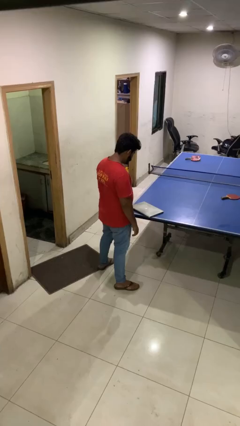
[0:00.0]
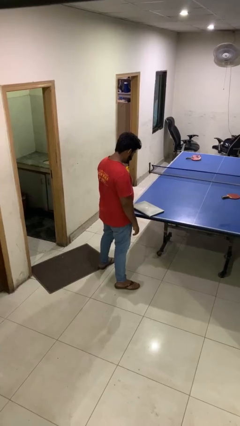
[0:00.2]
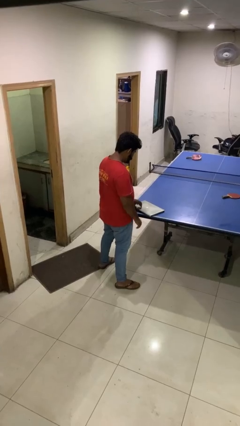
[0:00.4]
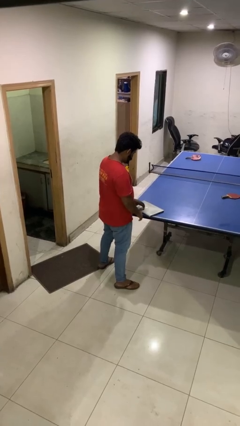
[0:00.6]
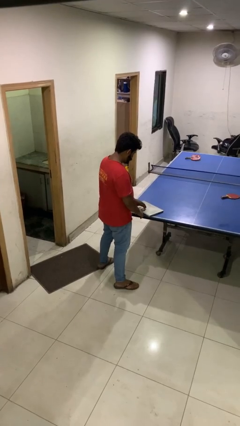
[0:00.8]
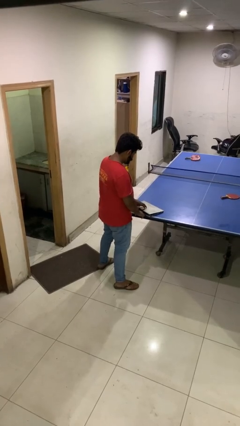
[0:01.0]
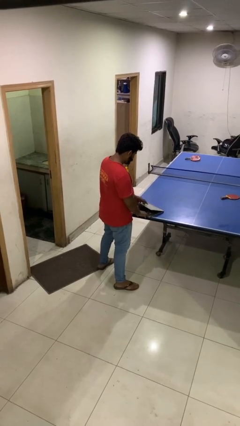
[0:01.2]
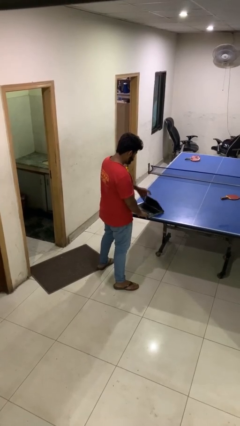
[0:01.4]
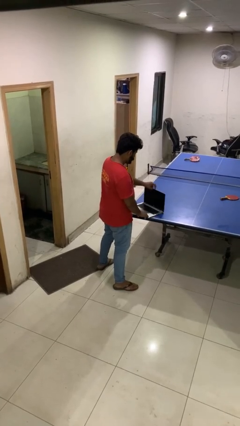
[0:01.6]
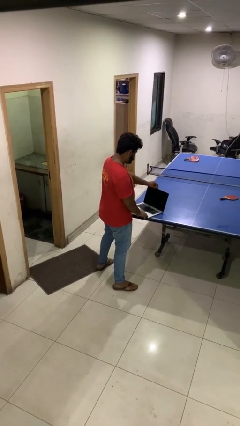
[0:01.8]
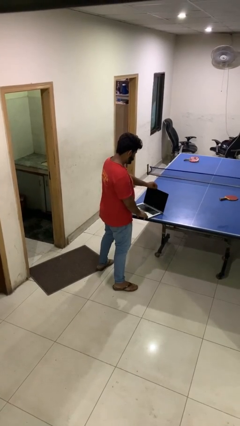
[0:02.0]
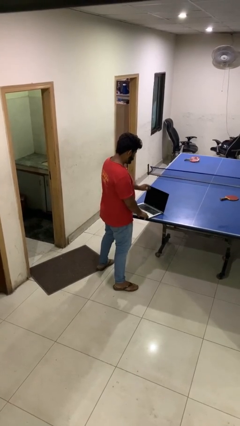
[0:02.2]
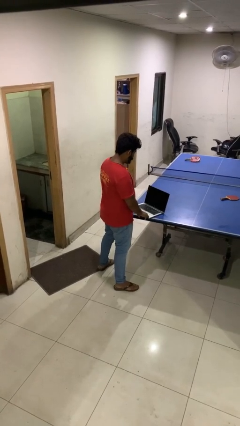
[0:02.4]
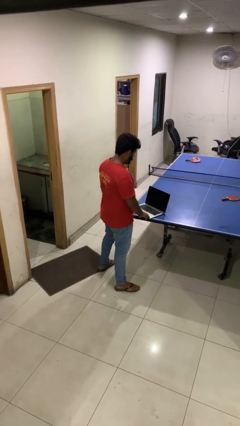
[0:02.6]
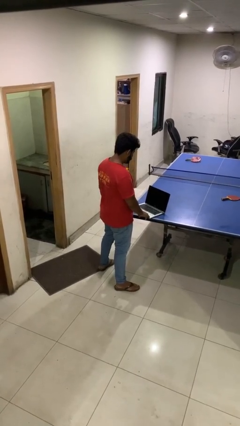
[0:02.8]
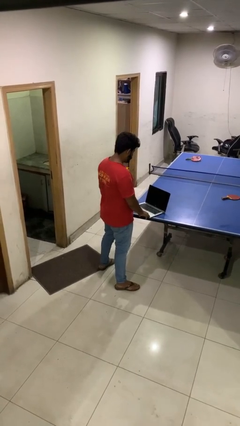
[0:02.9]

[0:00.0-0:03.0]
person opens laptop

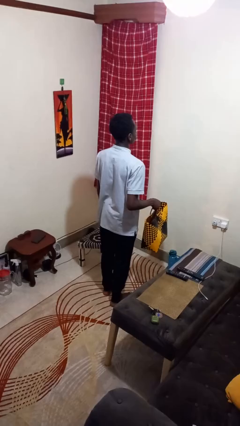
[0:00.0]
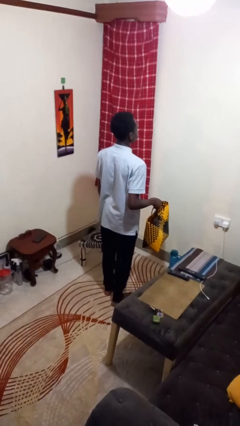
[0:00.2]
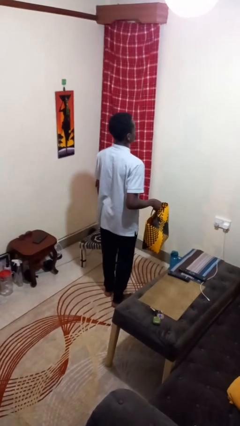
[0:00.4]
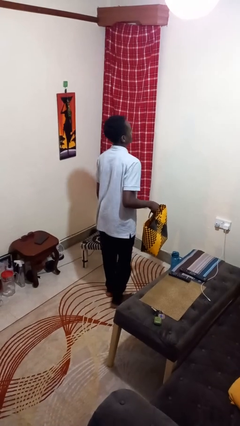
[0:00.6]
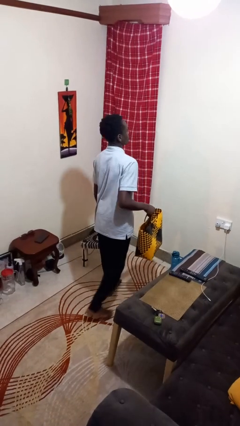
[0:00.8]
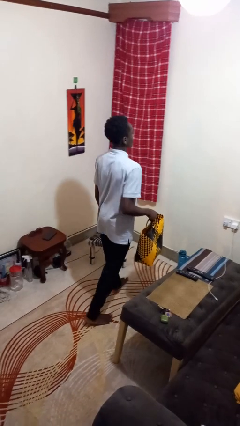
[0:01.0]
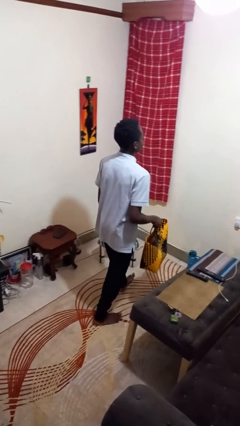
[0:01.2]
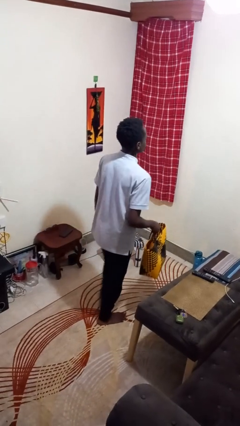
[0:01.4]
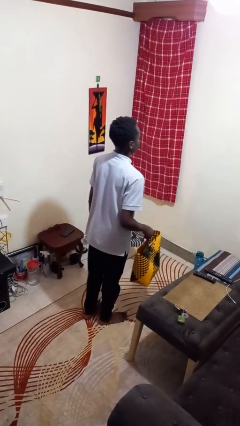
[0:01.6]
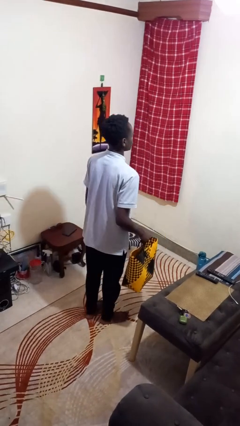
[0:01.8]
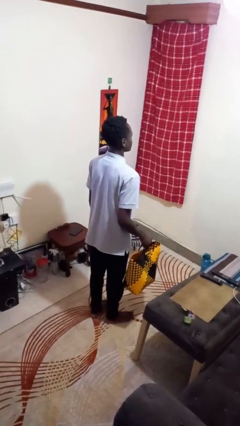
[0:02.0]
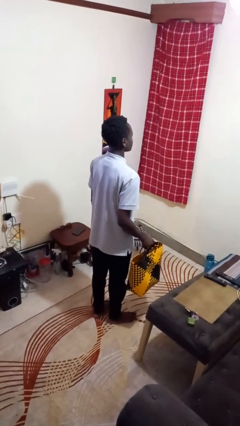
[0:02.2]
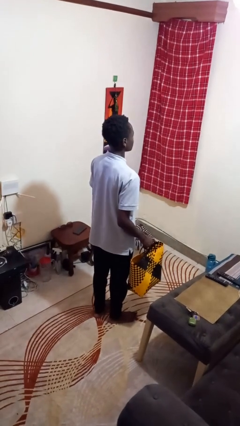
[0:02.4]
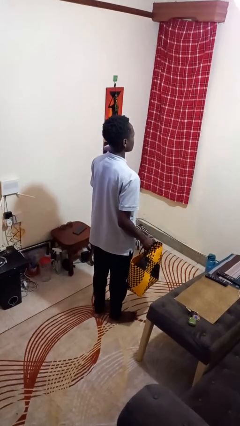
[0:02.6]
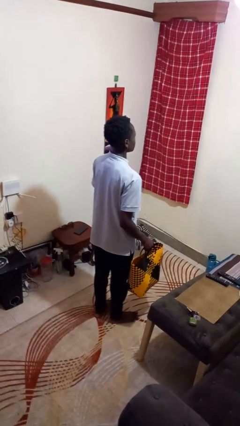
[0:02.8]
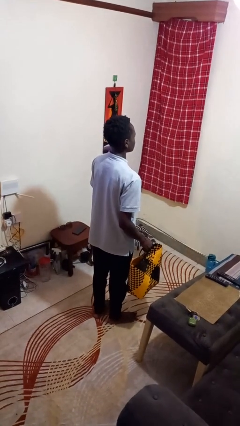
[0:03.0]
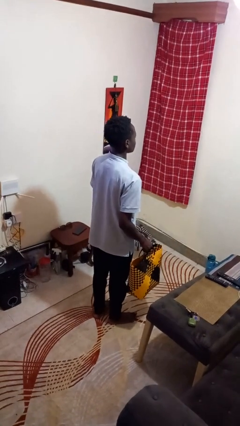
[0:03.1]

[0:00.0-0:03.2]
person carries groceries

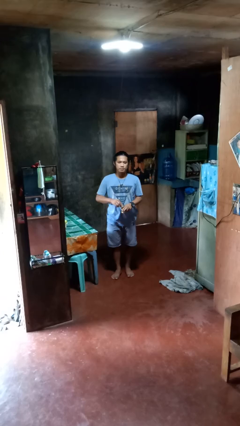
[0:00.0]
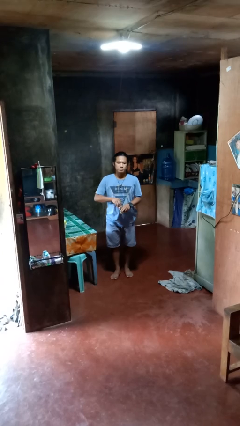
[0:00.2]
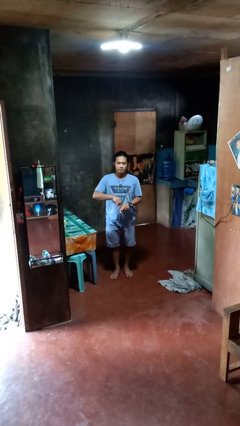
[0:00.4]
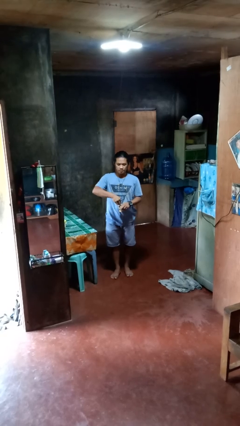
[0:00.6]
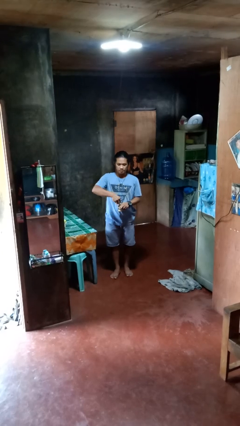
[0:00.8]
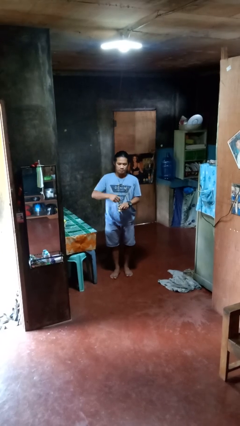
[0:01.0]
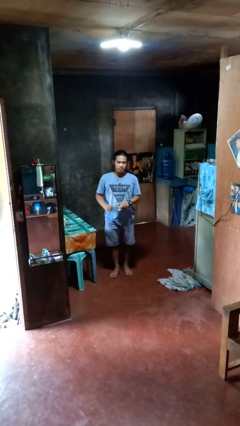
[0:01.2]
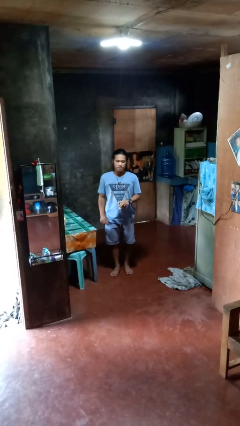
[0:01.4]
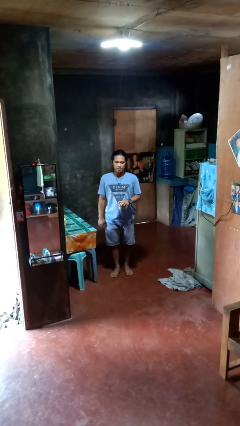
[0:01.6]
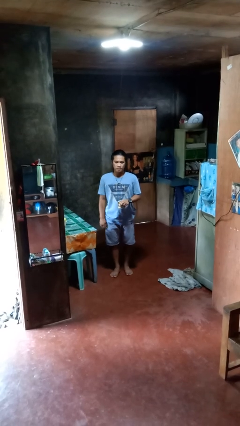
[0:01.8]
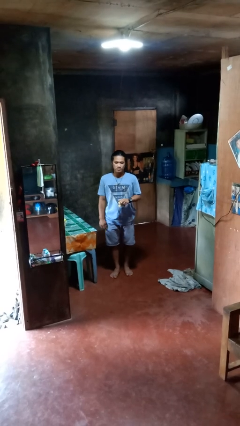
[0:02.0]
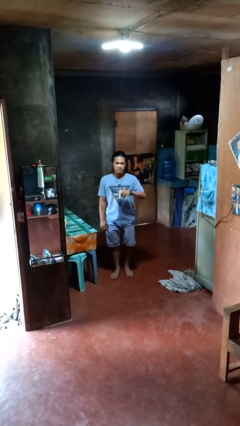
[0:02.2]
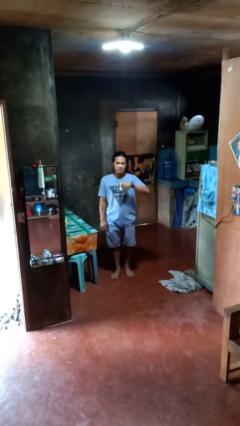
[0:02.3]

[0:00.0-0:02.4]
person opens beverage can

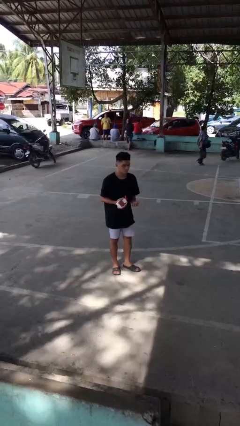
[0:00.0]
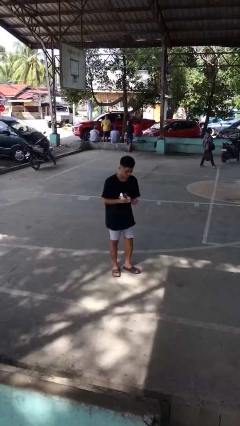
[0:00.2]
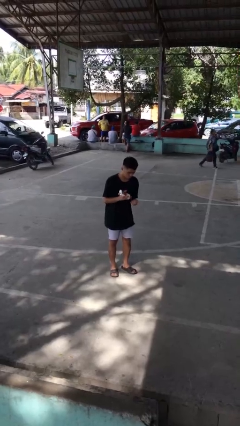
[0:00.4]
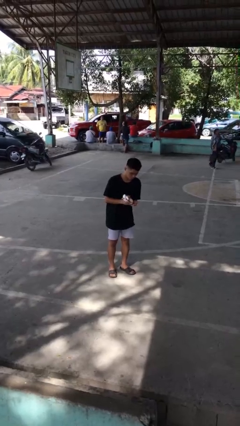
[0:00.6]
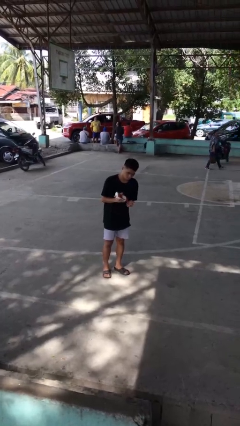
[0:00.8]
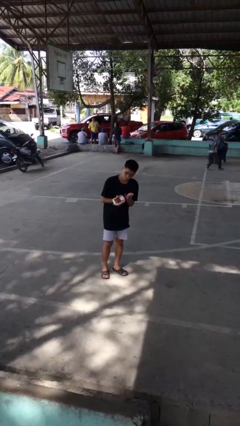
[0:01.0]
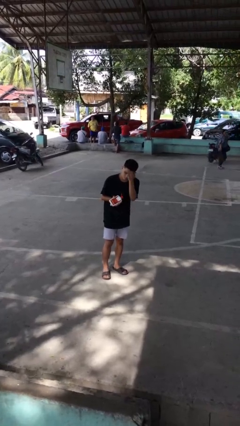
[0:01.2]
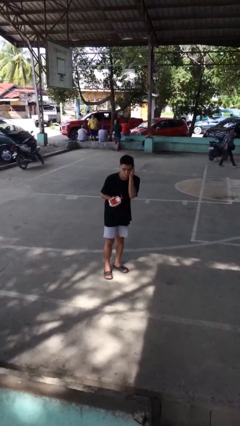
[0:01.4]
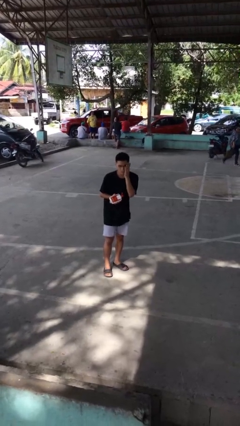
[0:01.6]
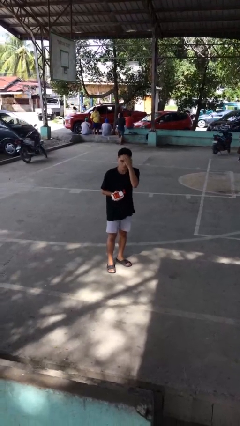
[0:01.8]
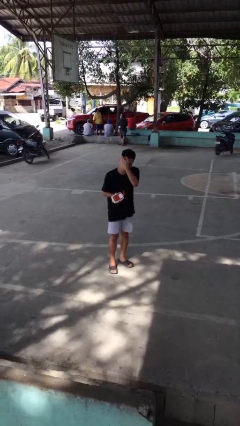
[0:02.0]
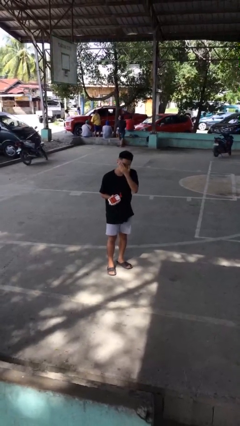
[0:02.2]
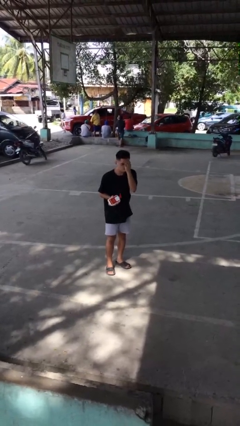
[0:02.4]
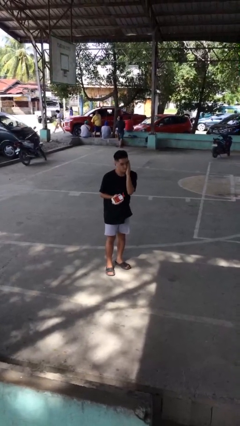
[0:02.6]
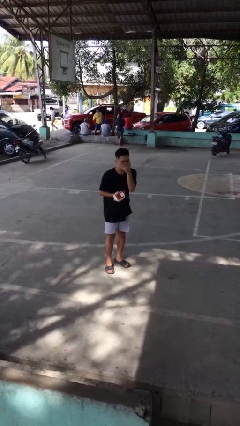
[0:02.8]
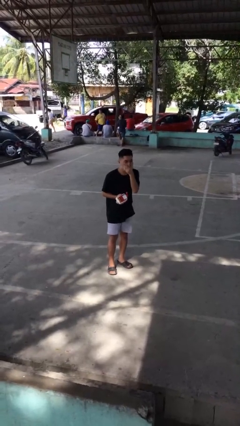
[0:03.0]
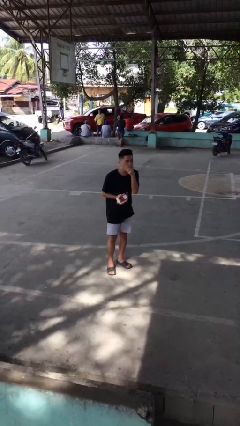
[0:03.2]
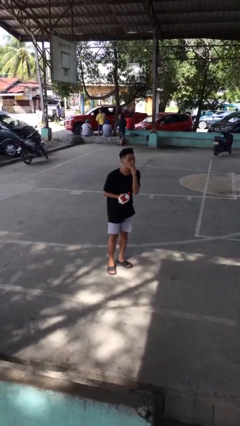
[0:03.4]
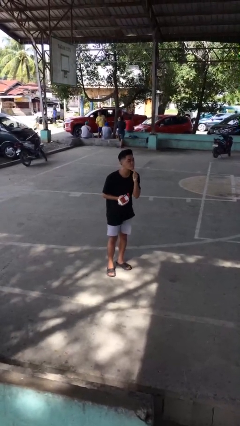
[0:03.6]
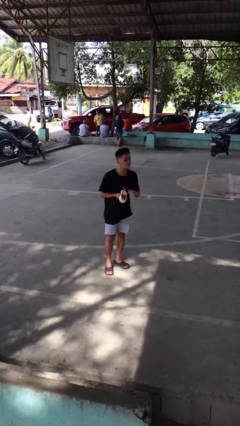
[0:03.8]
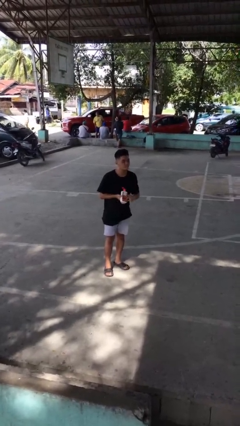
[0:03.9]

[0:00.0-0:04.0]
person applies facial moisturizer

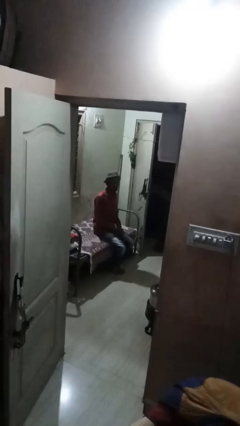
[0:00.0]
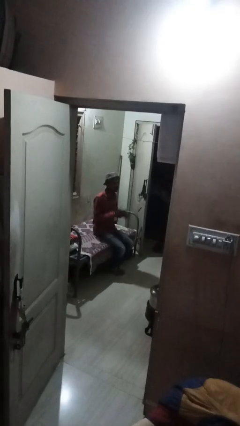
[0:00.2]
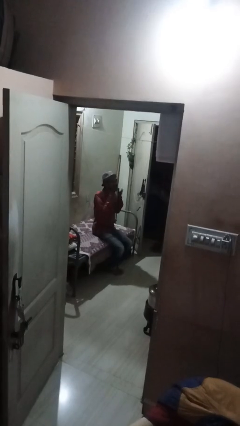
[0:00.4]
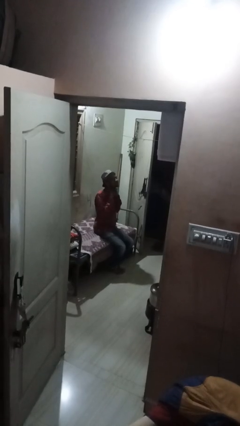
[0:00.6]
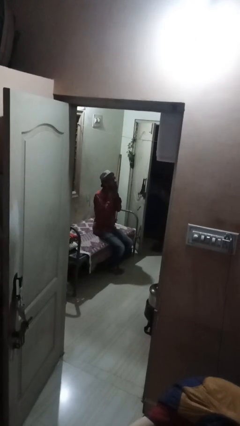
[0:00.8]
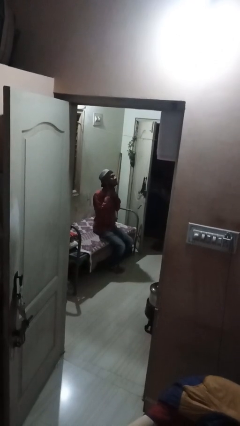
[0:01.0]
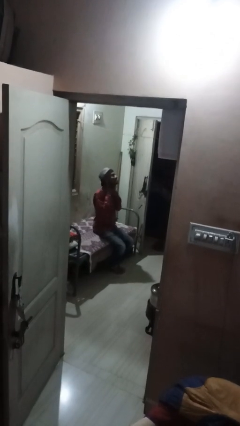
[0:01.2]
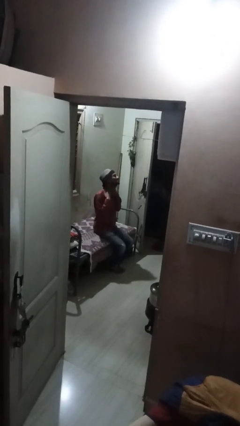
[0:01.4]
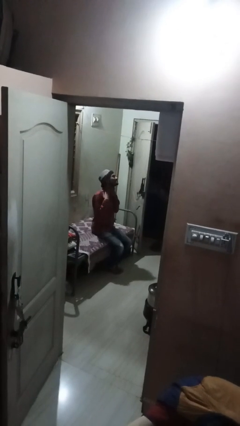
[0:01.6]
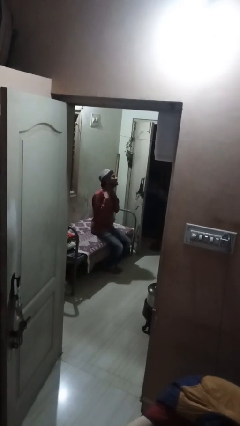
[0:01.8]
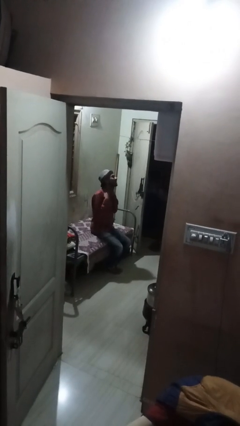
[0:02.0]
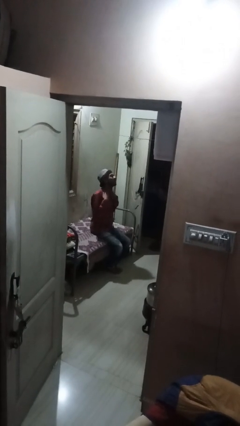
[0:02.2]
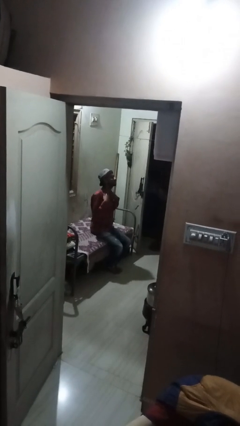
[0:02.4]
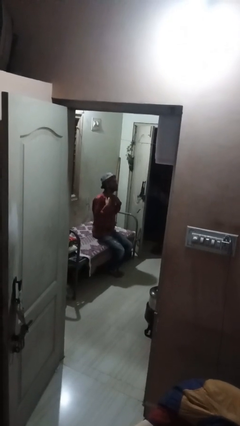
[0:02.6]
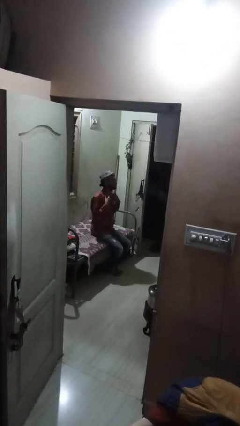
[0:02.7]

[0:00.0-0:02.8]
person rubs neck

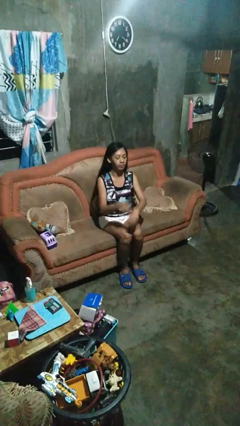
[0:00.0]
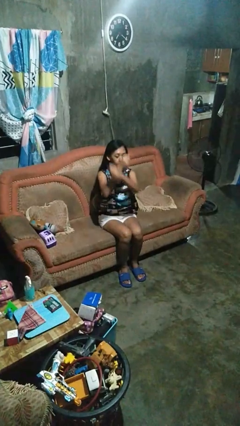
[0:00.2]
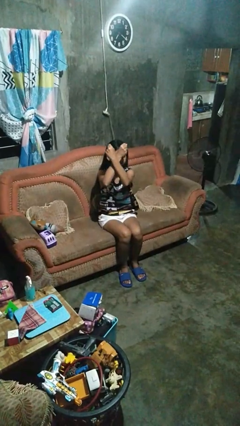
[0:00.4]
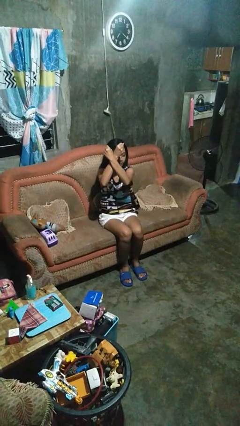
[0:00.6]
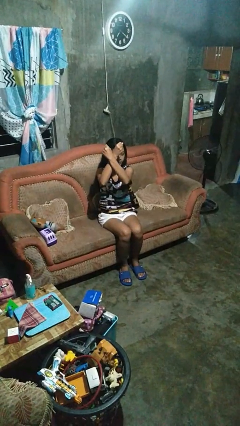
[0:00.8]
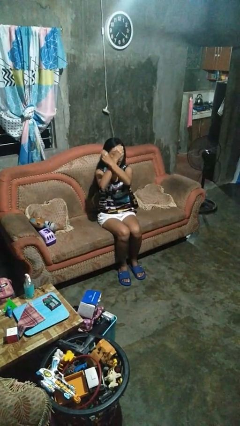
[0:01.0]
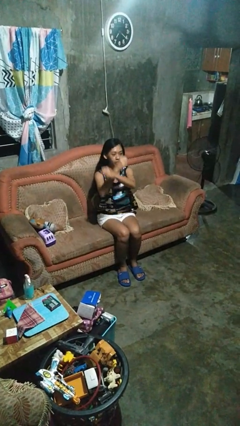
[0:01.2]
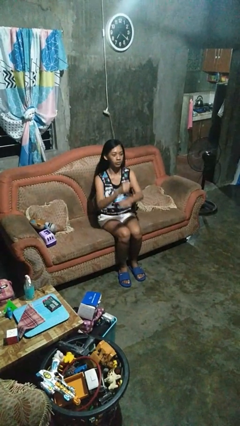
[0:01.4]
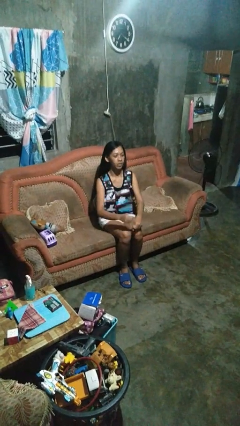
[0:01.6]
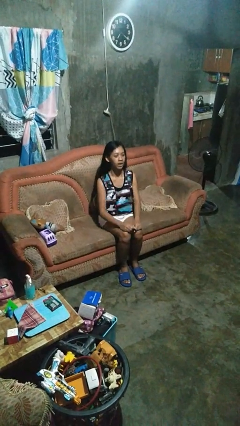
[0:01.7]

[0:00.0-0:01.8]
person gestures arms x

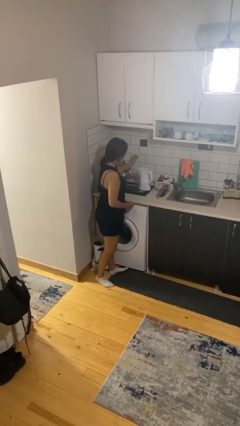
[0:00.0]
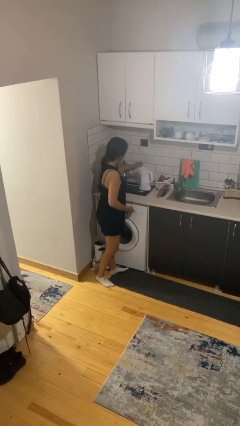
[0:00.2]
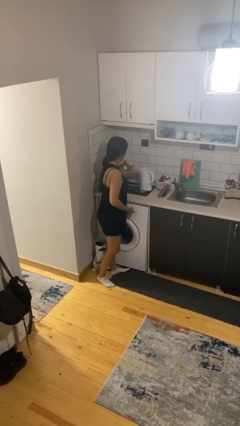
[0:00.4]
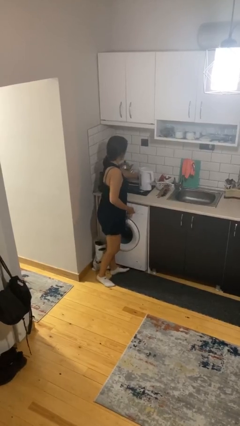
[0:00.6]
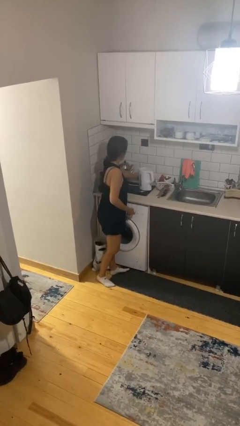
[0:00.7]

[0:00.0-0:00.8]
person unplugs from electrical socket
